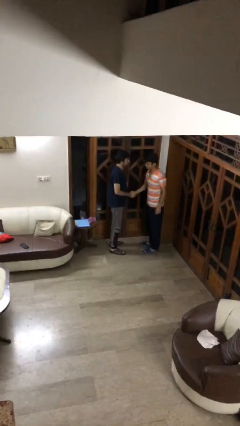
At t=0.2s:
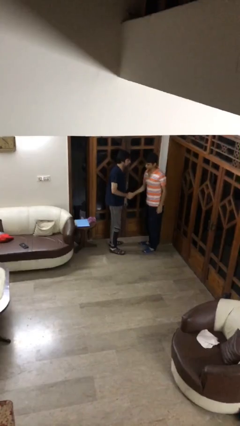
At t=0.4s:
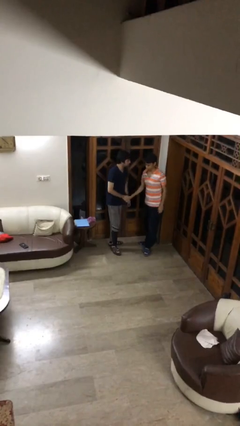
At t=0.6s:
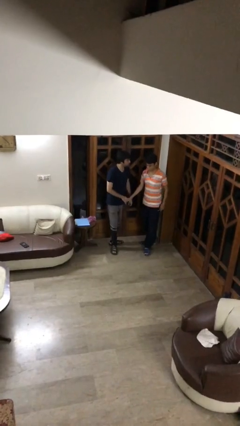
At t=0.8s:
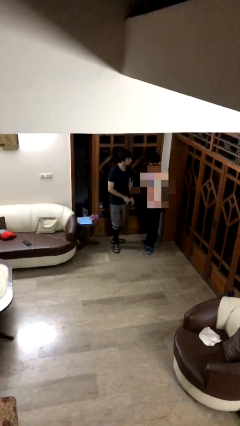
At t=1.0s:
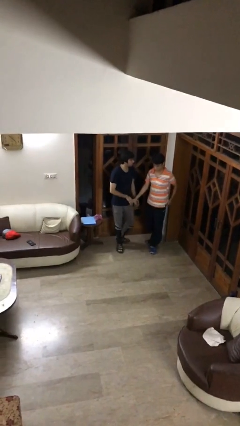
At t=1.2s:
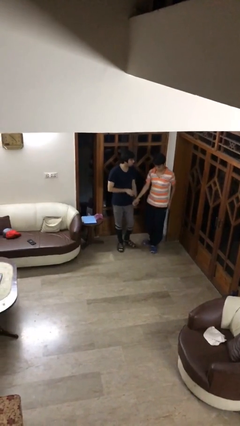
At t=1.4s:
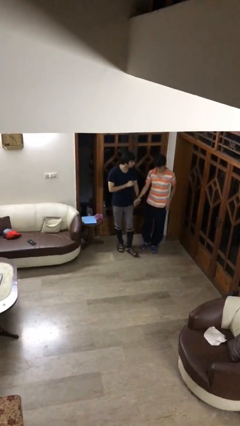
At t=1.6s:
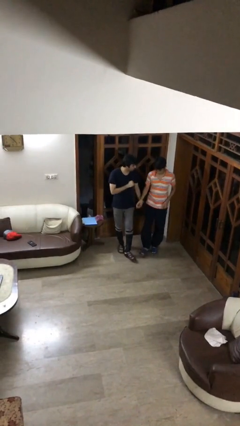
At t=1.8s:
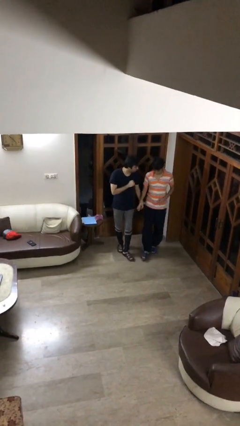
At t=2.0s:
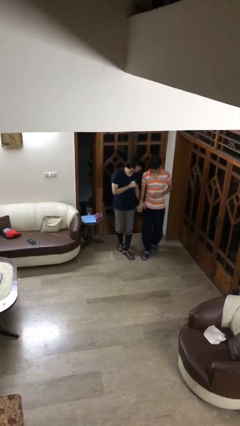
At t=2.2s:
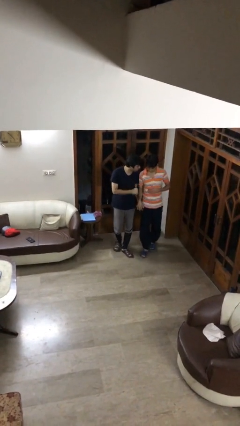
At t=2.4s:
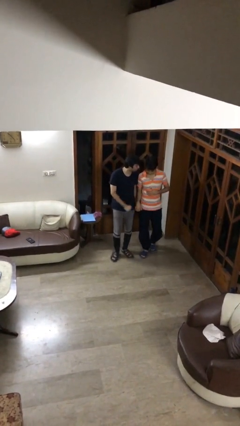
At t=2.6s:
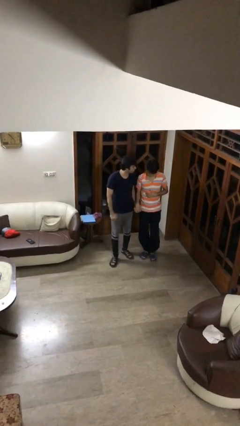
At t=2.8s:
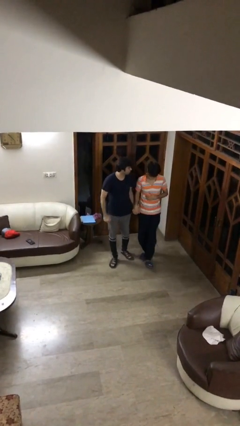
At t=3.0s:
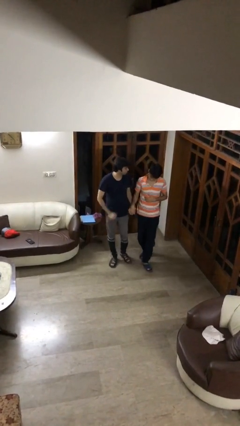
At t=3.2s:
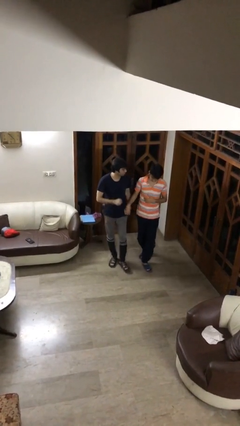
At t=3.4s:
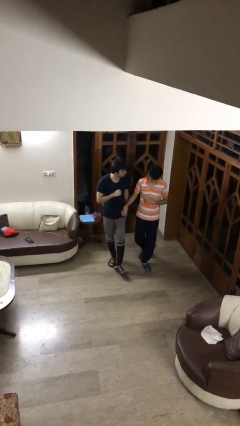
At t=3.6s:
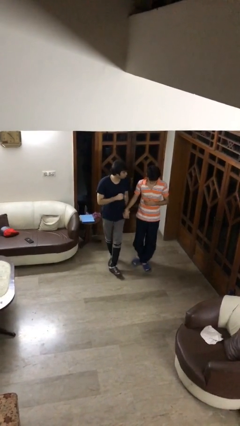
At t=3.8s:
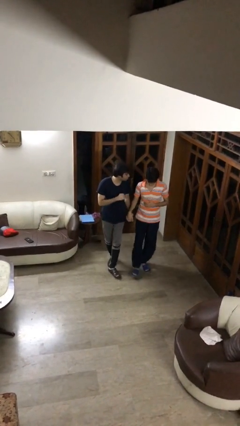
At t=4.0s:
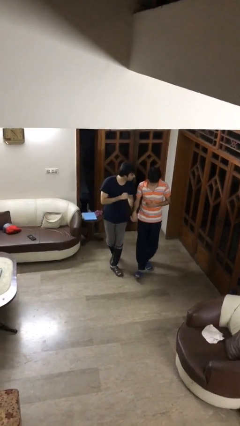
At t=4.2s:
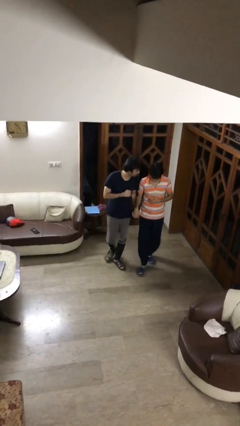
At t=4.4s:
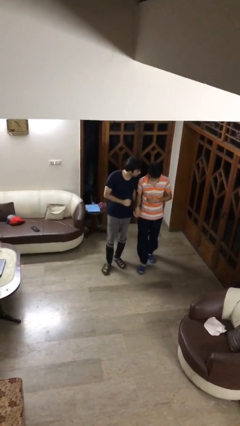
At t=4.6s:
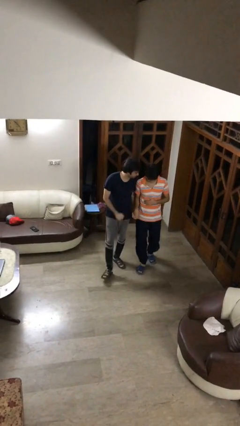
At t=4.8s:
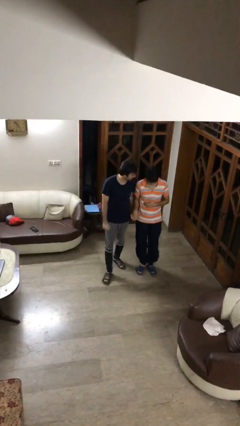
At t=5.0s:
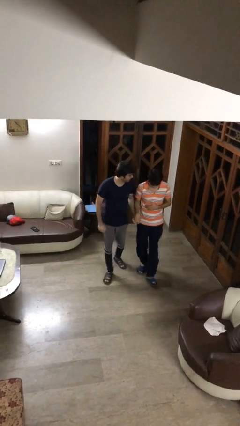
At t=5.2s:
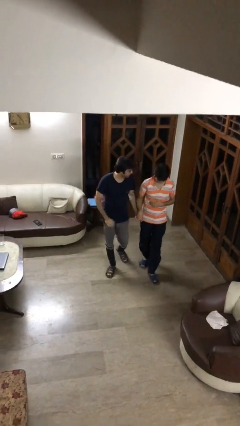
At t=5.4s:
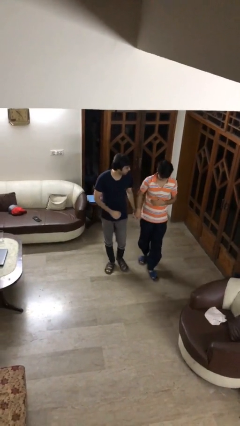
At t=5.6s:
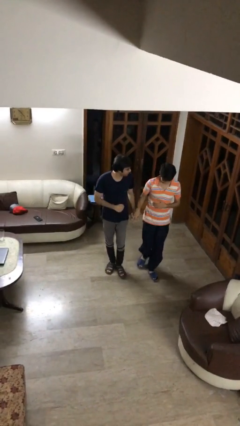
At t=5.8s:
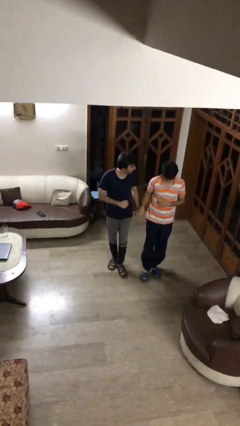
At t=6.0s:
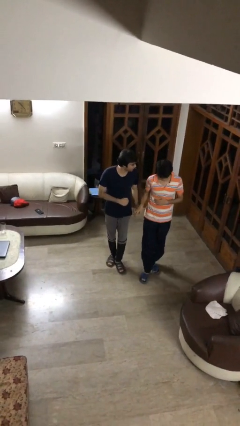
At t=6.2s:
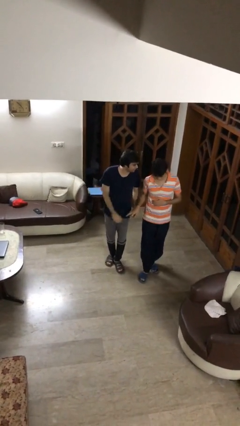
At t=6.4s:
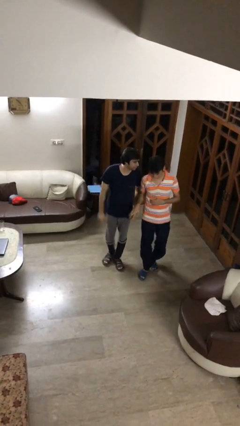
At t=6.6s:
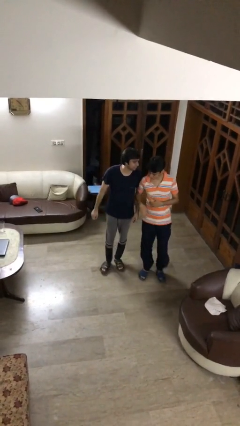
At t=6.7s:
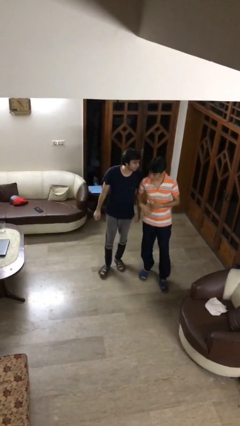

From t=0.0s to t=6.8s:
person talks to person

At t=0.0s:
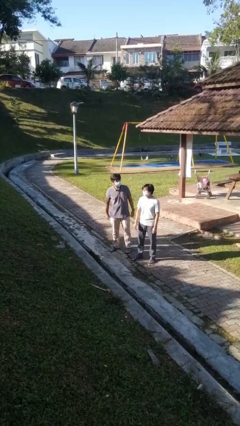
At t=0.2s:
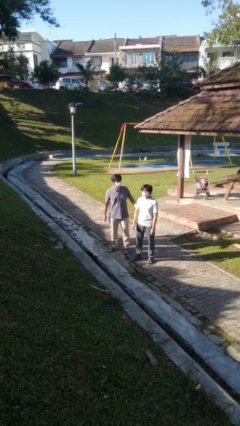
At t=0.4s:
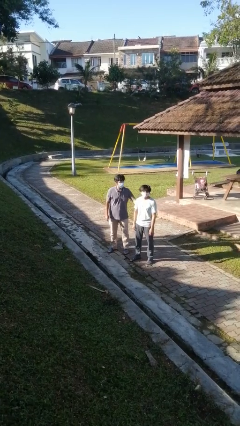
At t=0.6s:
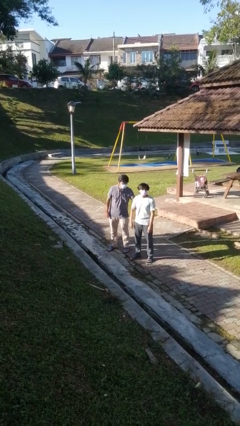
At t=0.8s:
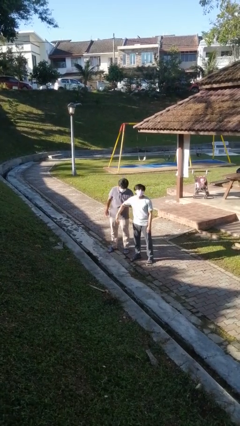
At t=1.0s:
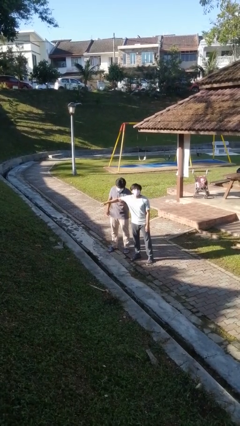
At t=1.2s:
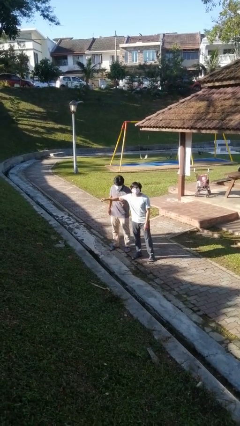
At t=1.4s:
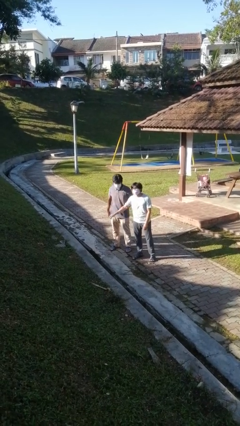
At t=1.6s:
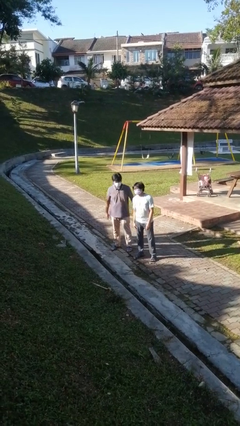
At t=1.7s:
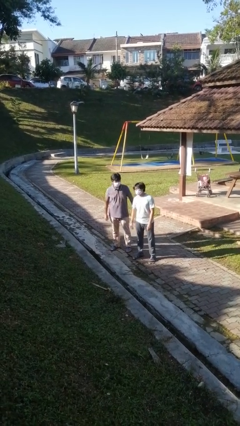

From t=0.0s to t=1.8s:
person grabs person by bicep

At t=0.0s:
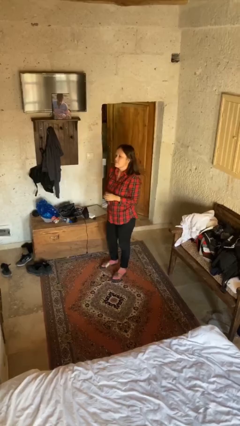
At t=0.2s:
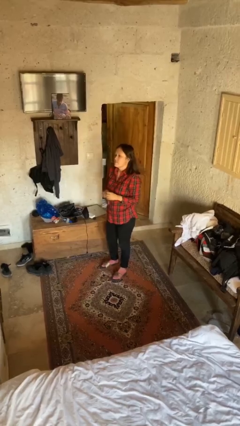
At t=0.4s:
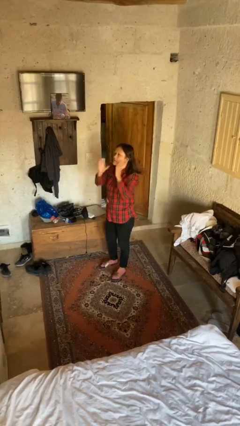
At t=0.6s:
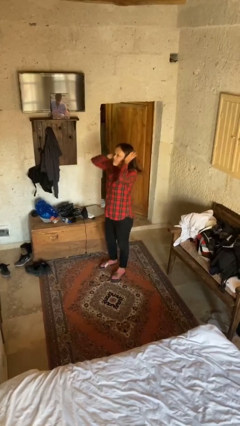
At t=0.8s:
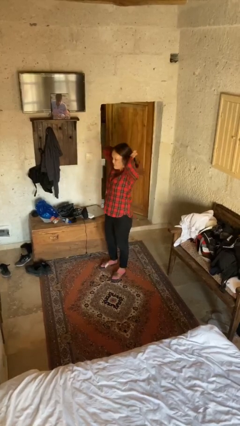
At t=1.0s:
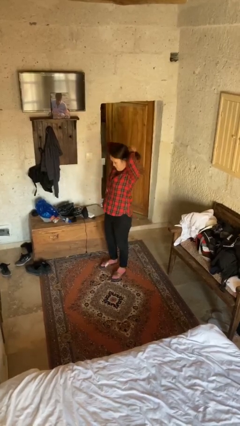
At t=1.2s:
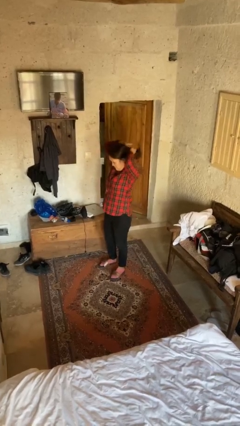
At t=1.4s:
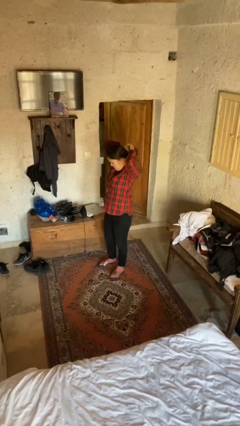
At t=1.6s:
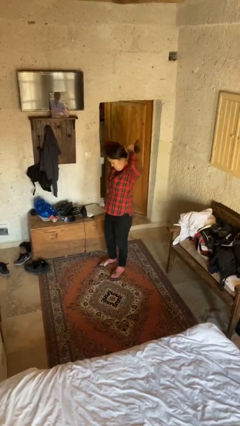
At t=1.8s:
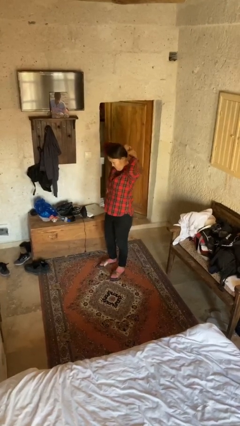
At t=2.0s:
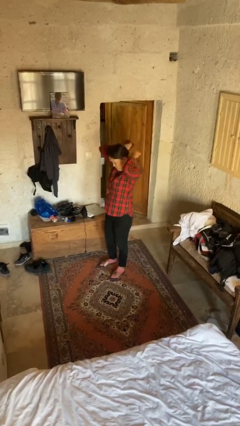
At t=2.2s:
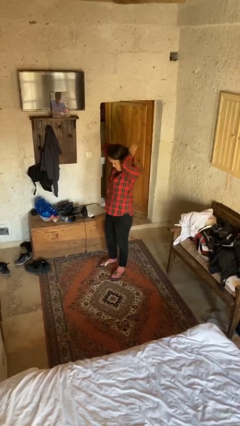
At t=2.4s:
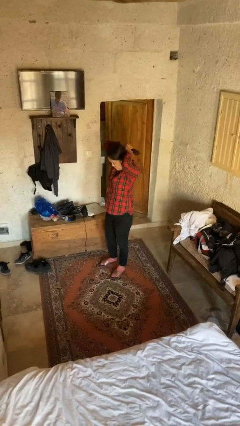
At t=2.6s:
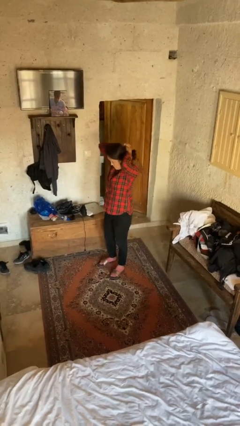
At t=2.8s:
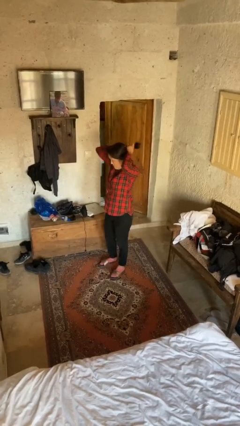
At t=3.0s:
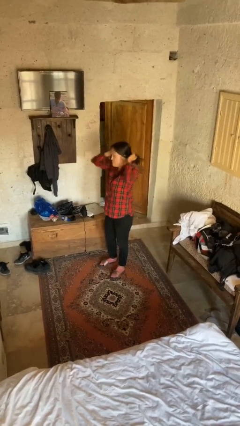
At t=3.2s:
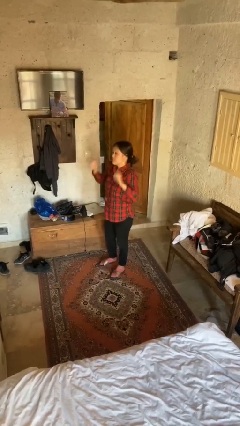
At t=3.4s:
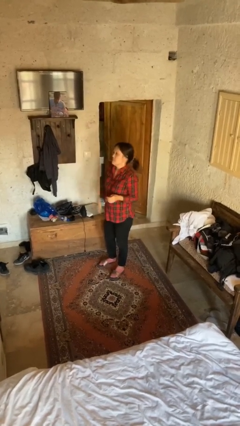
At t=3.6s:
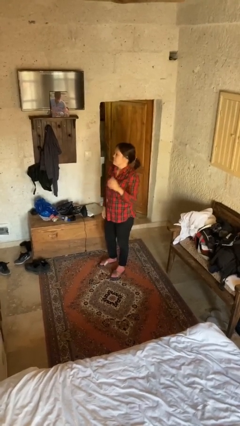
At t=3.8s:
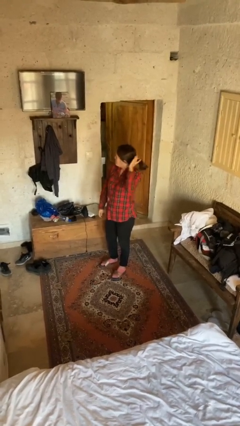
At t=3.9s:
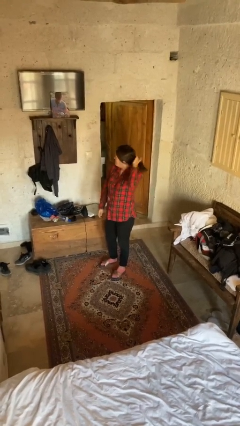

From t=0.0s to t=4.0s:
person puts hair in ponytail

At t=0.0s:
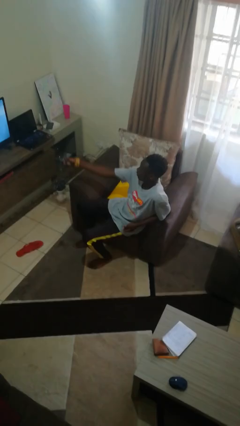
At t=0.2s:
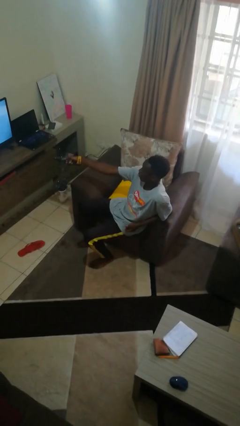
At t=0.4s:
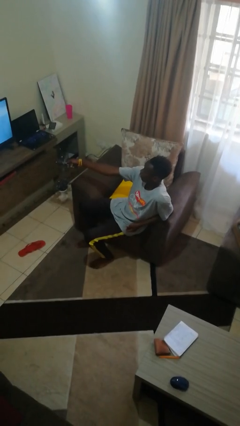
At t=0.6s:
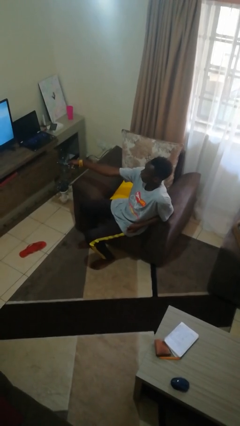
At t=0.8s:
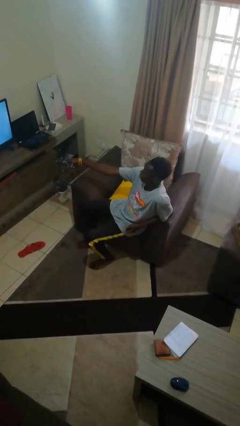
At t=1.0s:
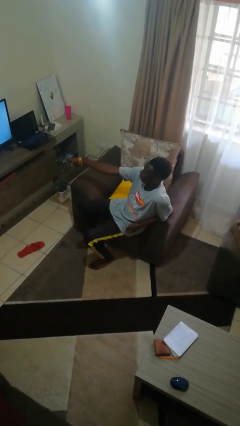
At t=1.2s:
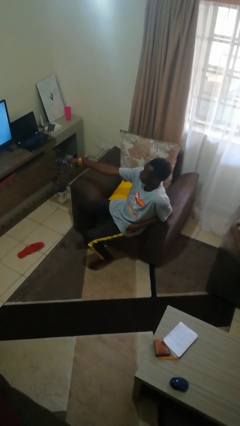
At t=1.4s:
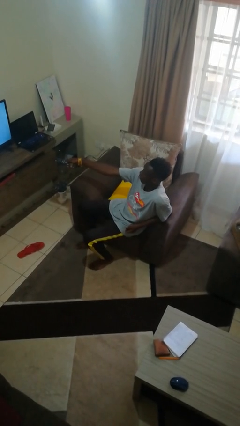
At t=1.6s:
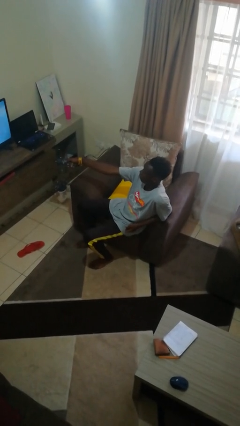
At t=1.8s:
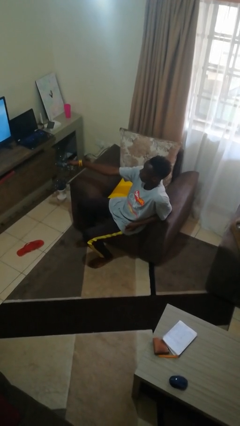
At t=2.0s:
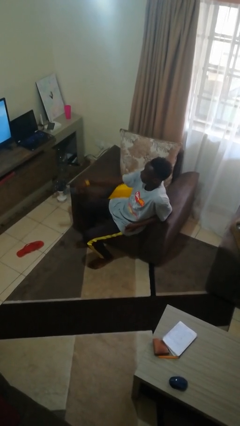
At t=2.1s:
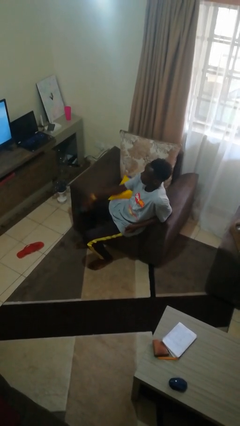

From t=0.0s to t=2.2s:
person uses television remote

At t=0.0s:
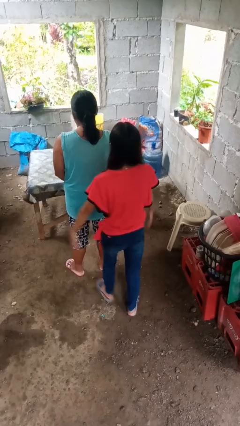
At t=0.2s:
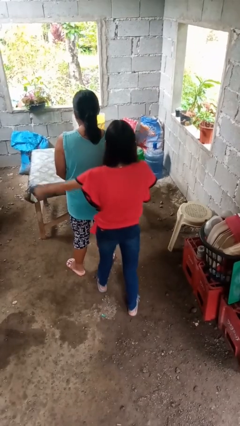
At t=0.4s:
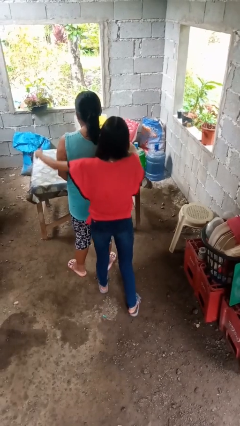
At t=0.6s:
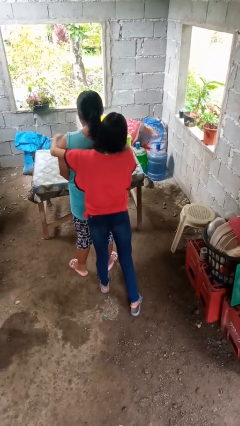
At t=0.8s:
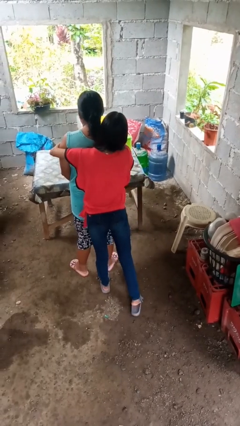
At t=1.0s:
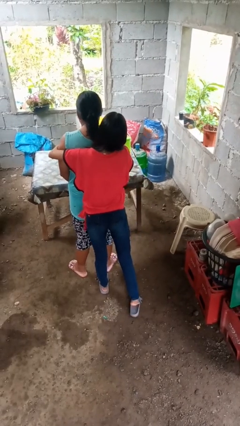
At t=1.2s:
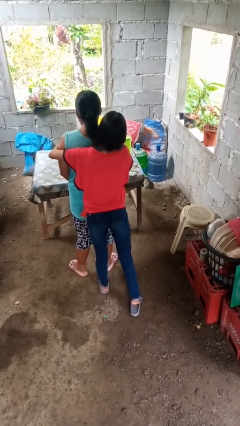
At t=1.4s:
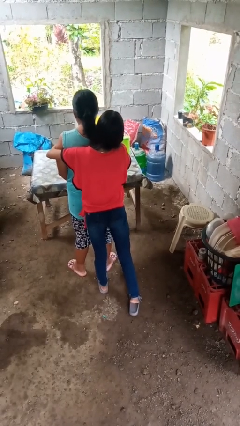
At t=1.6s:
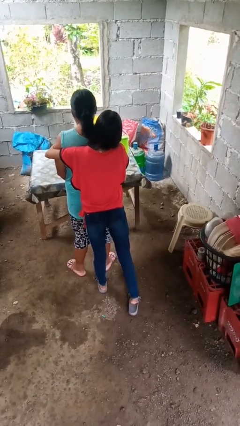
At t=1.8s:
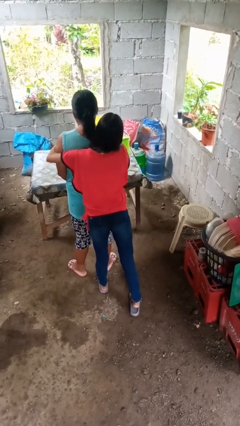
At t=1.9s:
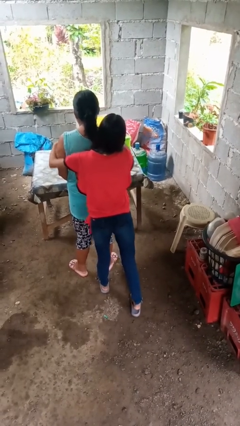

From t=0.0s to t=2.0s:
person hugs person from behind

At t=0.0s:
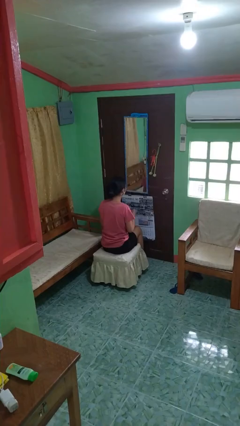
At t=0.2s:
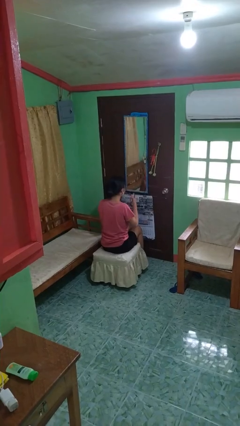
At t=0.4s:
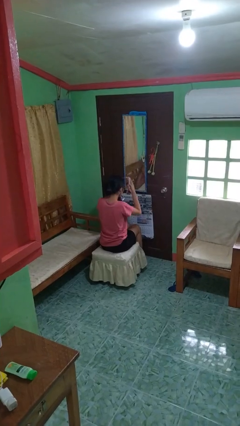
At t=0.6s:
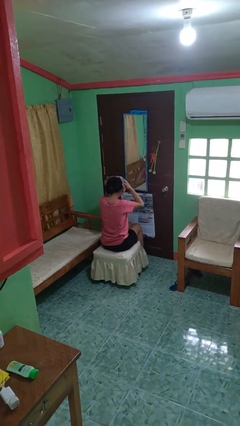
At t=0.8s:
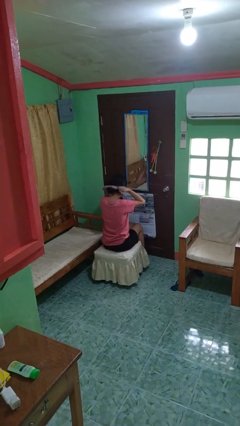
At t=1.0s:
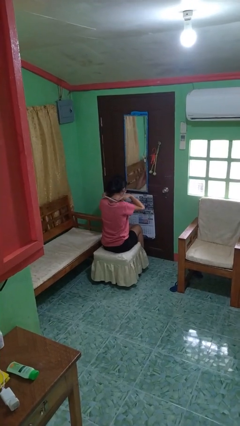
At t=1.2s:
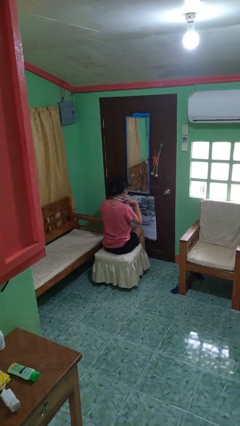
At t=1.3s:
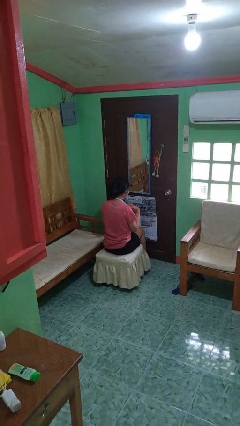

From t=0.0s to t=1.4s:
person puts on necklace
